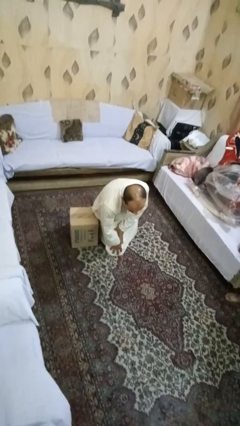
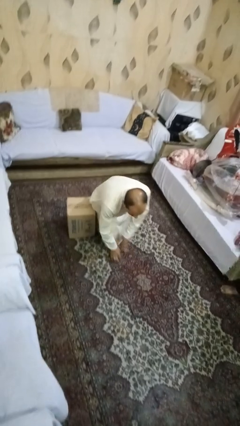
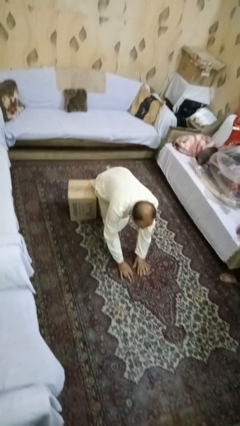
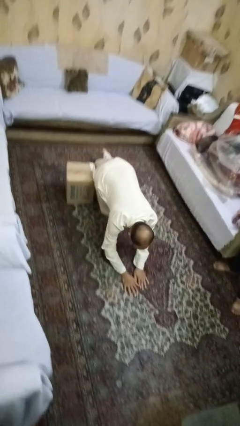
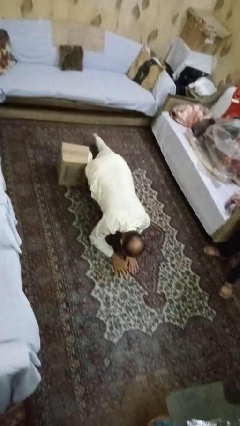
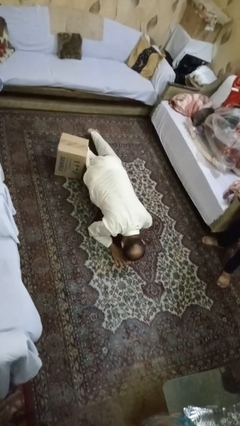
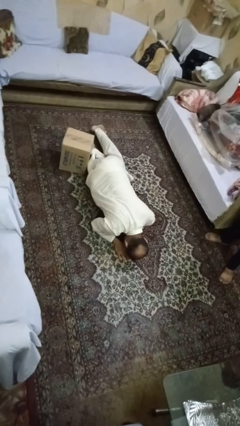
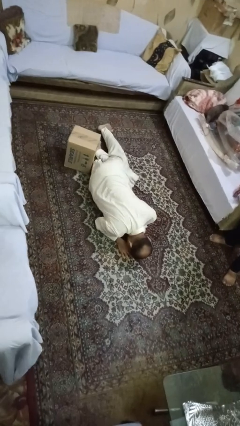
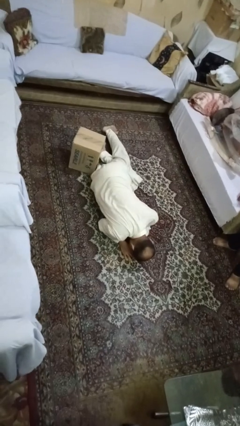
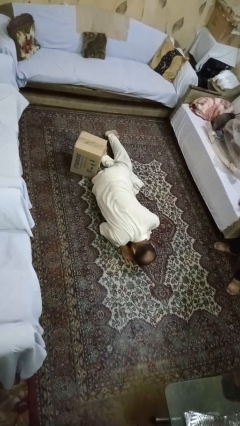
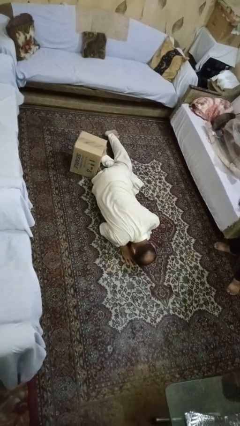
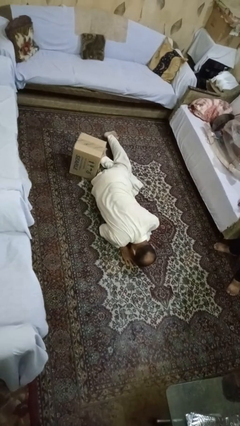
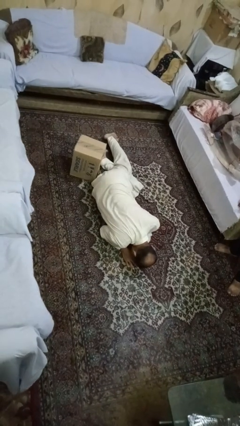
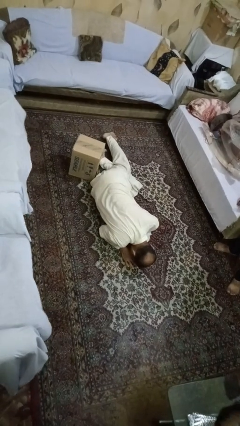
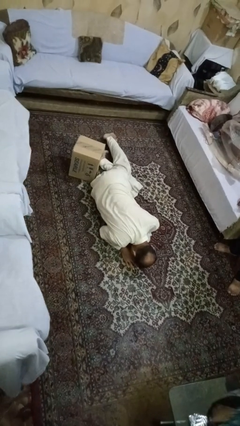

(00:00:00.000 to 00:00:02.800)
person lies down on floor

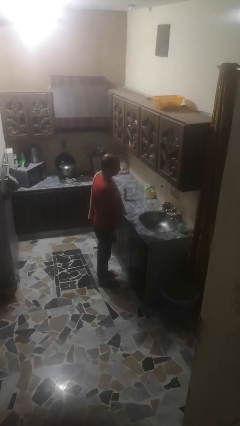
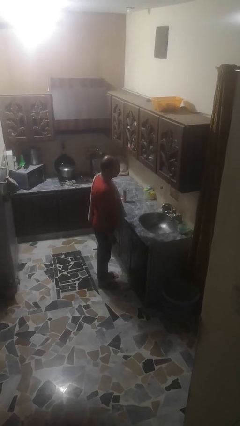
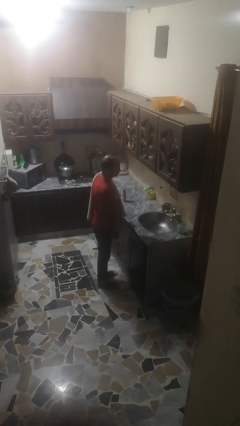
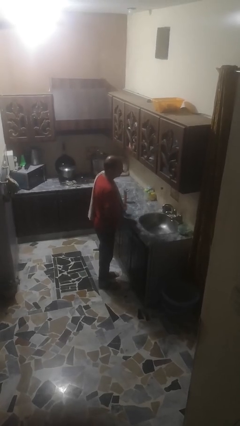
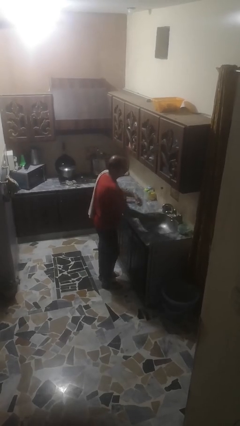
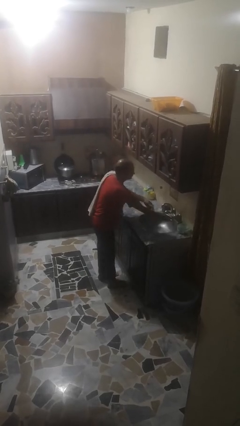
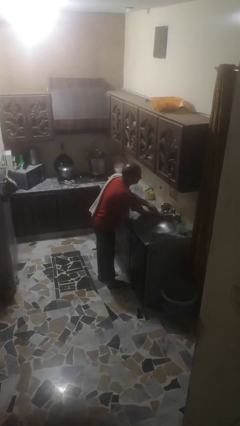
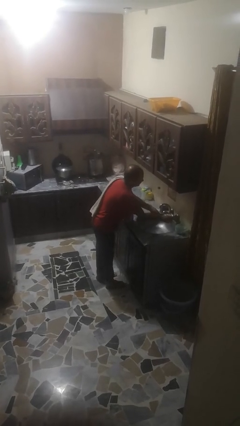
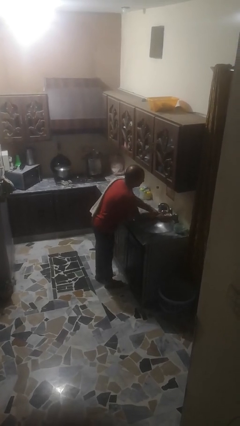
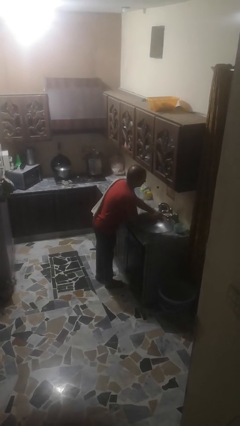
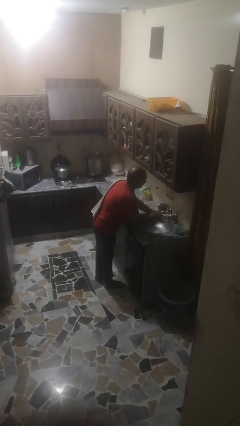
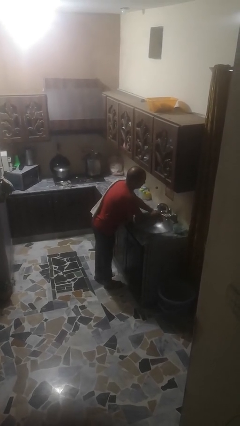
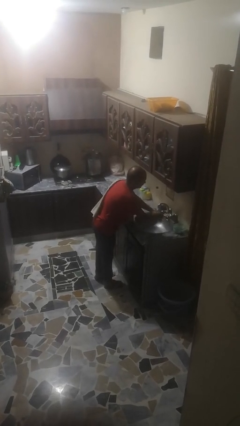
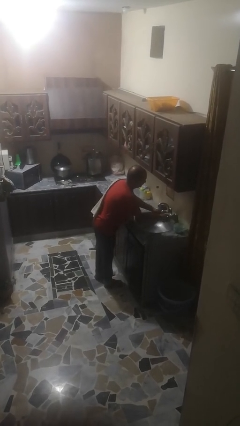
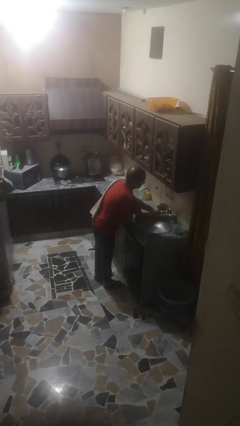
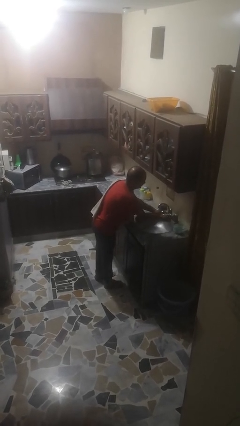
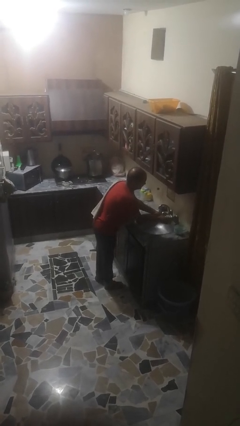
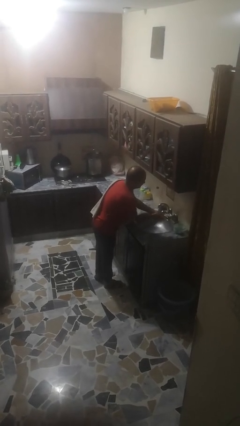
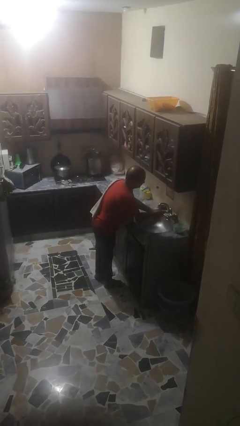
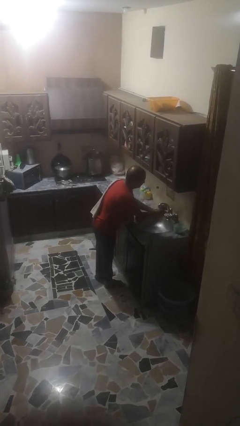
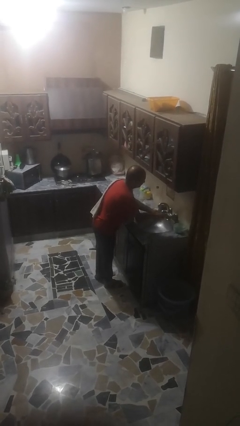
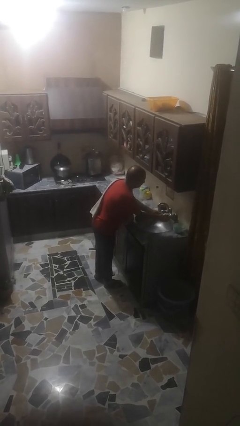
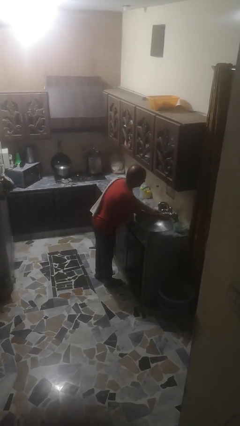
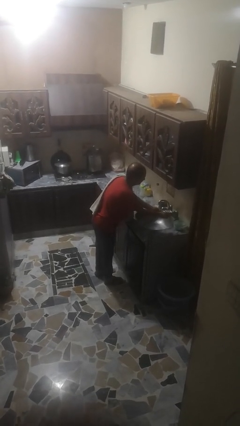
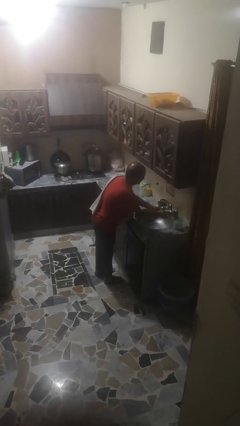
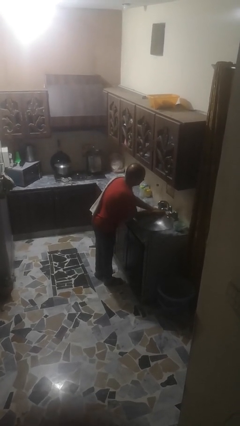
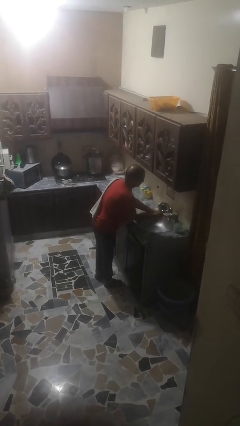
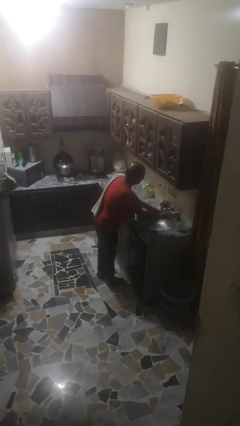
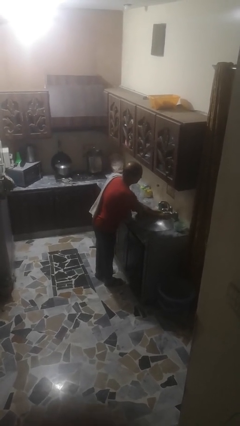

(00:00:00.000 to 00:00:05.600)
person washes hands

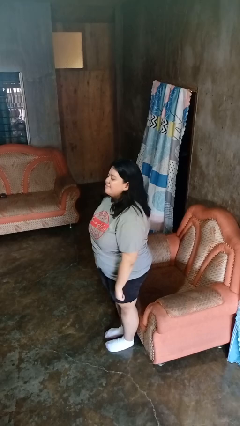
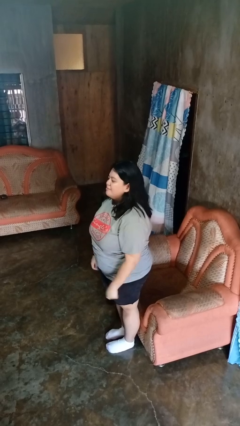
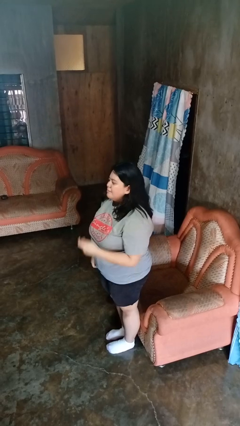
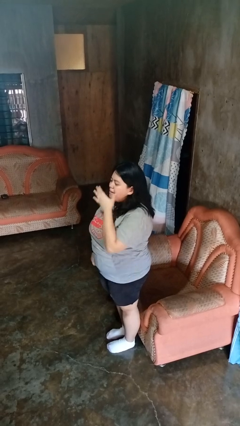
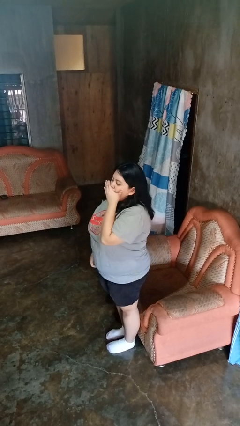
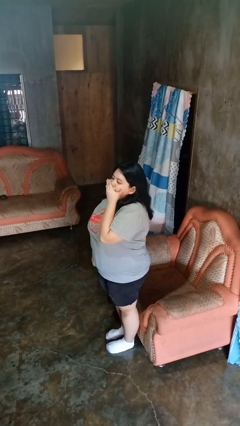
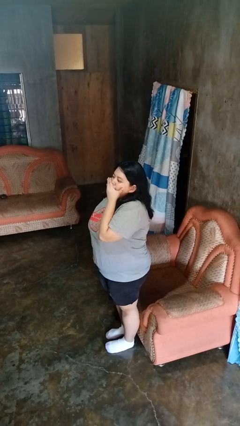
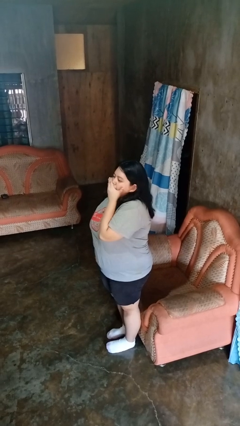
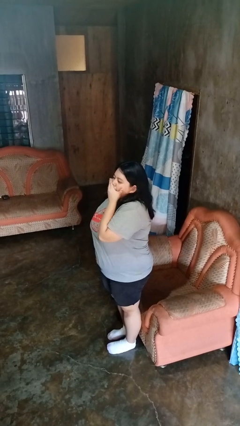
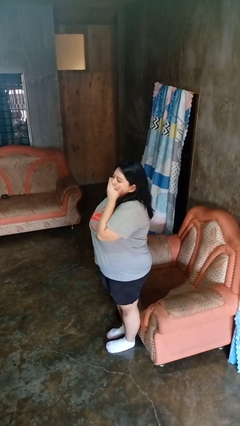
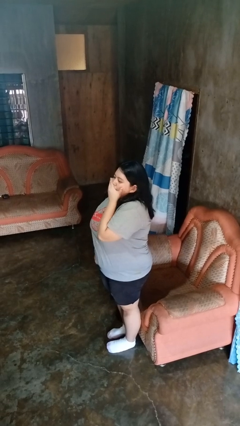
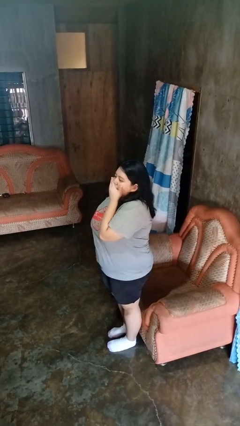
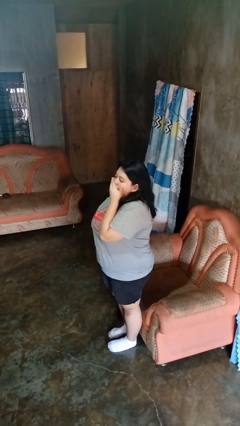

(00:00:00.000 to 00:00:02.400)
person yawns

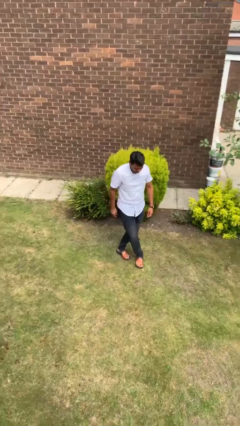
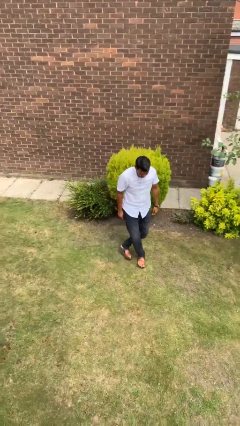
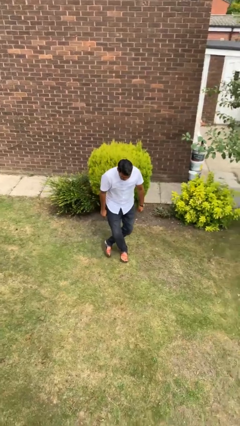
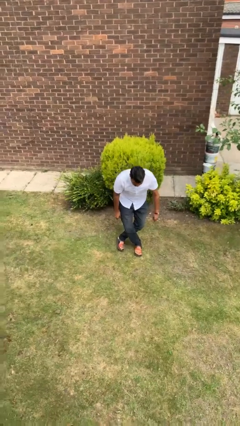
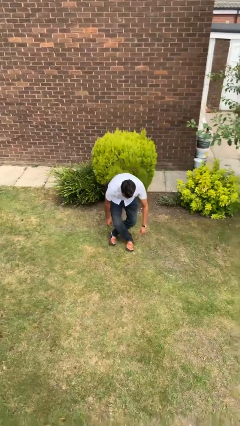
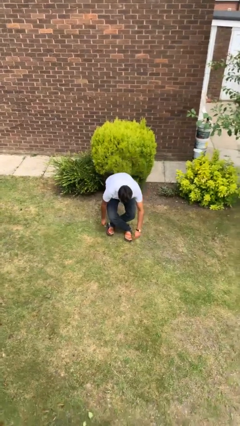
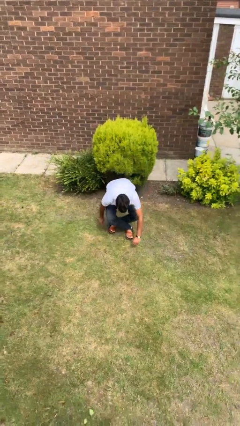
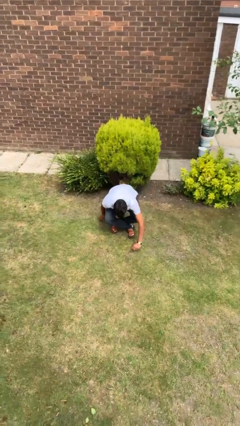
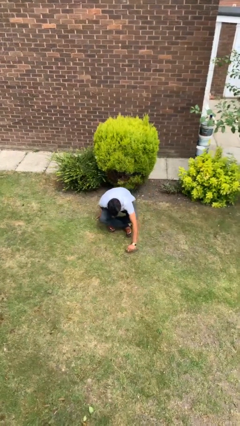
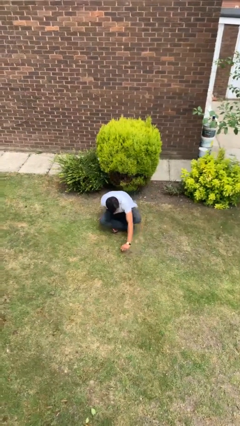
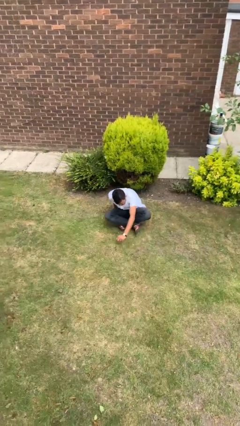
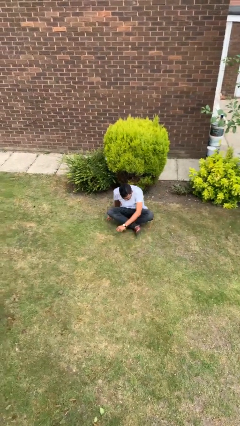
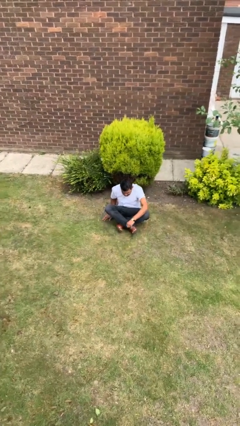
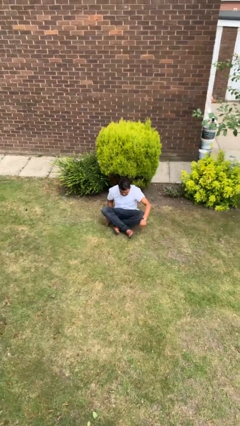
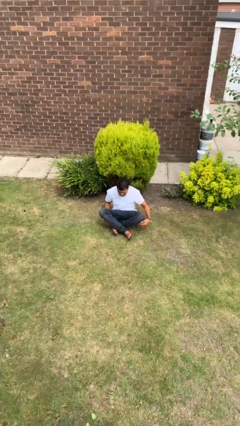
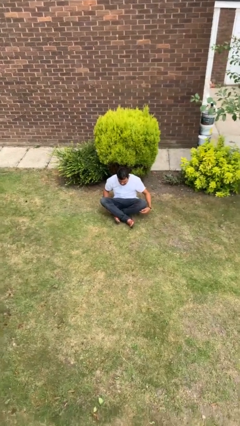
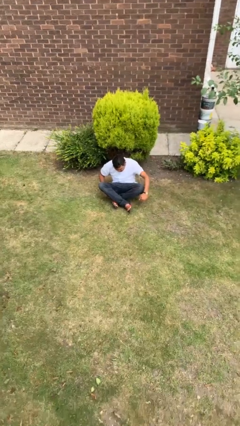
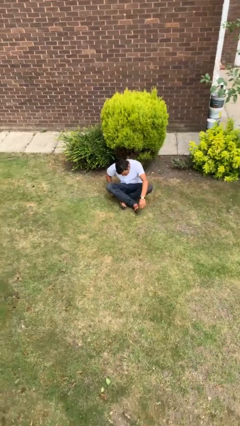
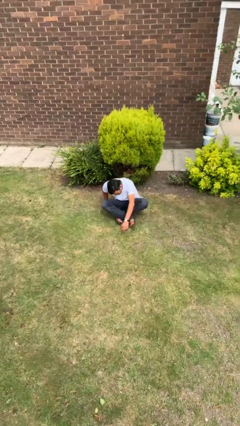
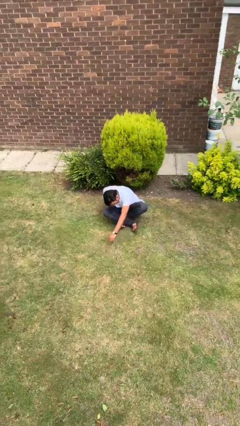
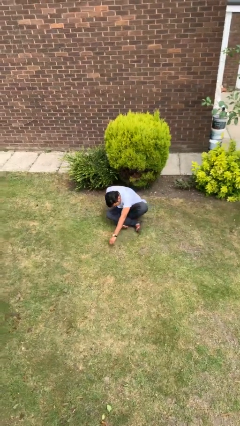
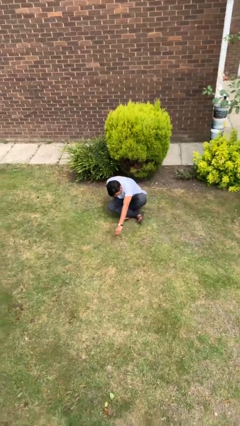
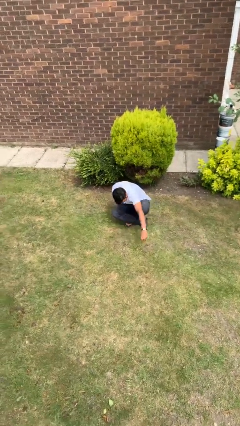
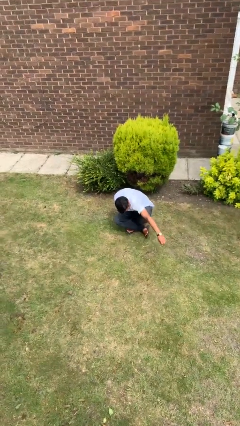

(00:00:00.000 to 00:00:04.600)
person sits crisscross

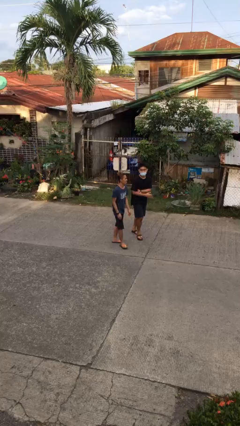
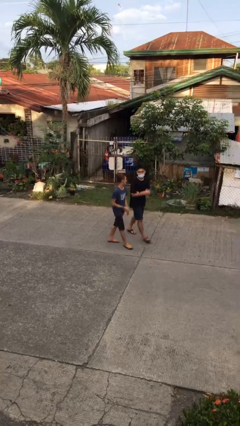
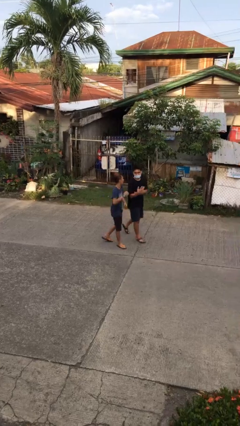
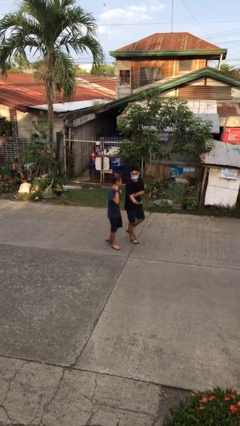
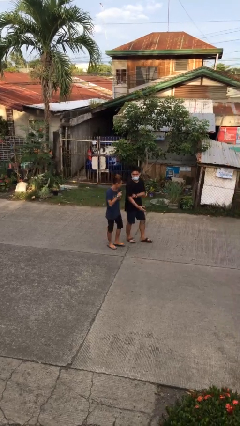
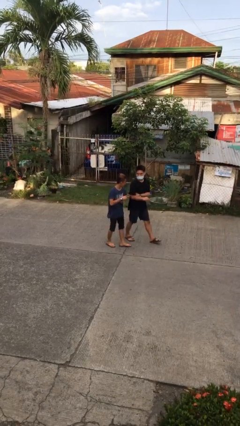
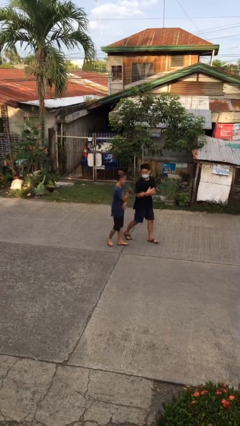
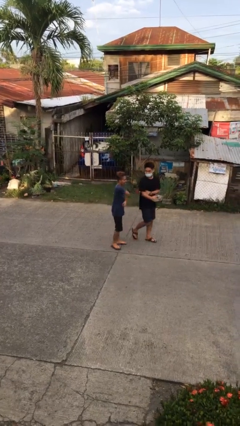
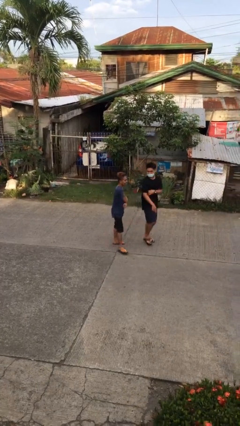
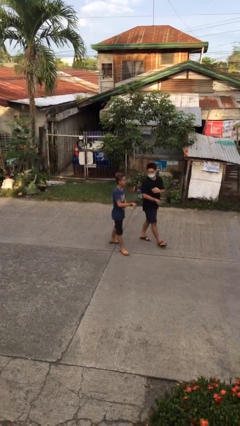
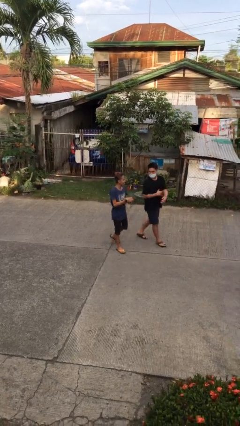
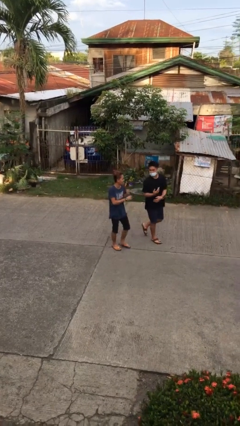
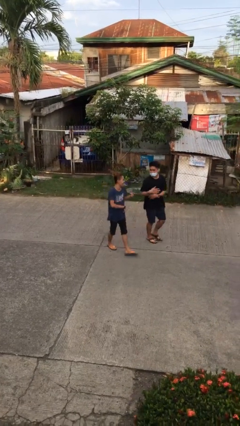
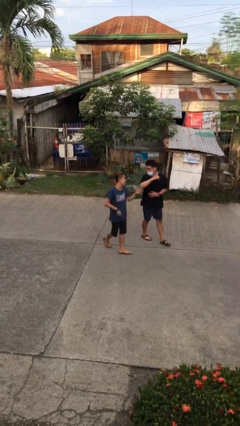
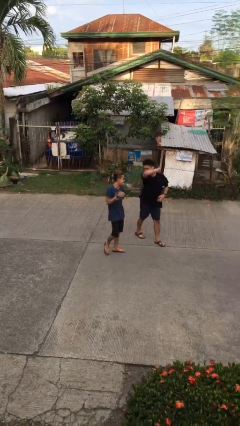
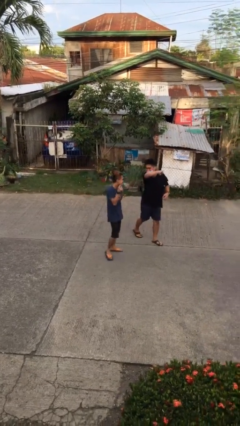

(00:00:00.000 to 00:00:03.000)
person talks to person
